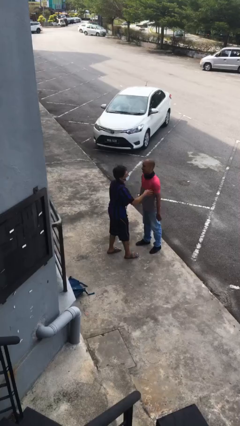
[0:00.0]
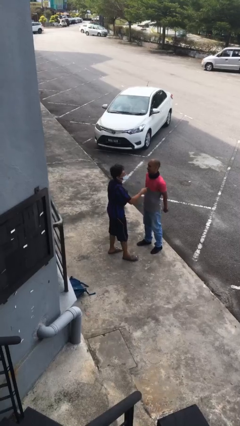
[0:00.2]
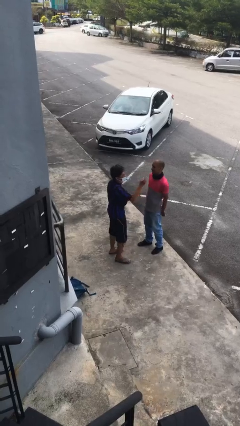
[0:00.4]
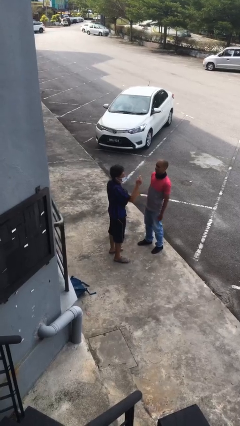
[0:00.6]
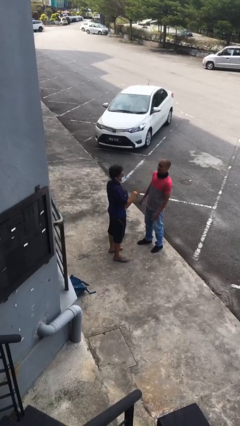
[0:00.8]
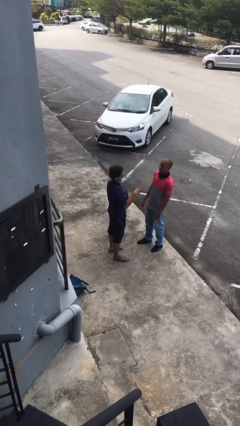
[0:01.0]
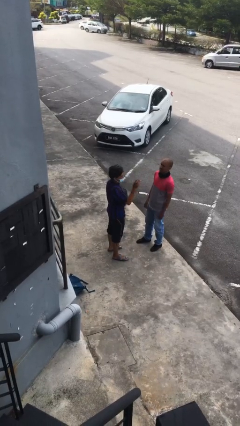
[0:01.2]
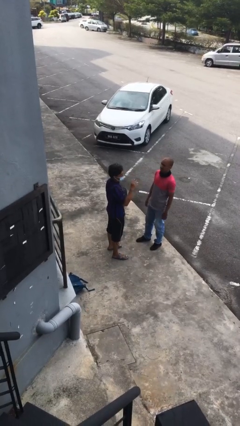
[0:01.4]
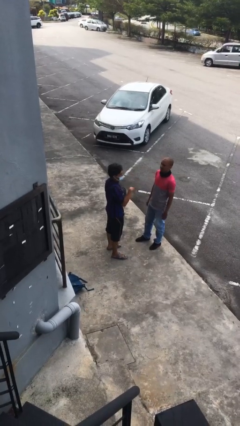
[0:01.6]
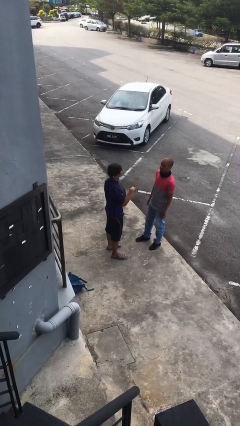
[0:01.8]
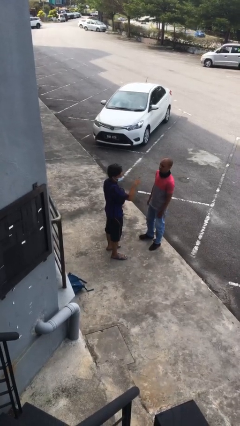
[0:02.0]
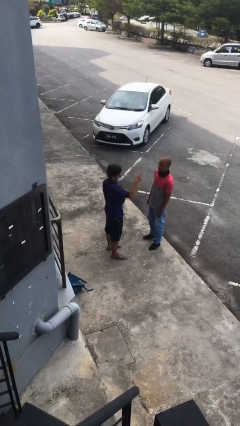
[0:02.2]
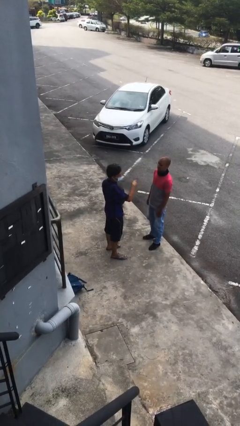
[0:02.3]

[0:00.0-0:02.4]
person talks to person

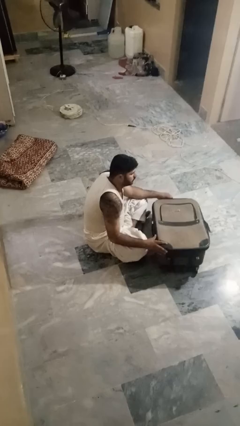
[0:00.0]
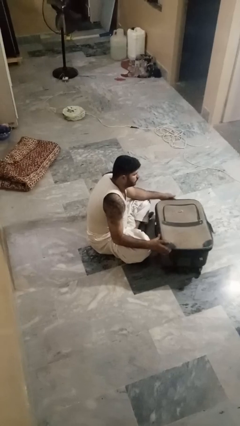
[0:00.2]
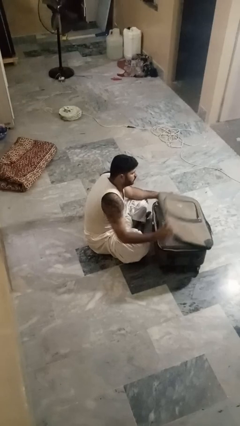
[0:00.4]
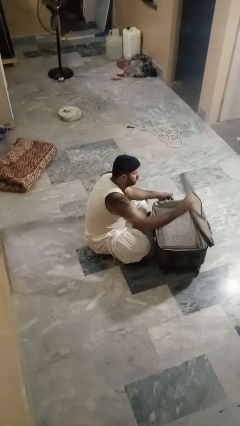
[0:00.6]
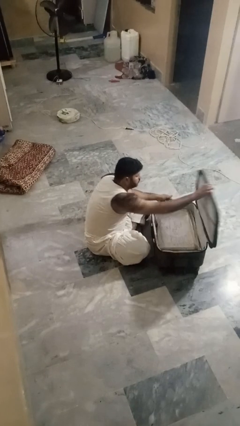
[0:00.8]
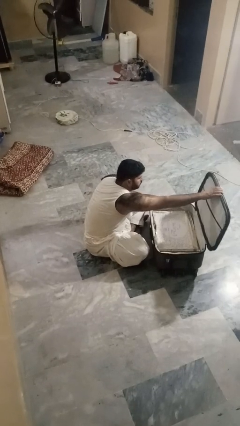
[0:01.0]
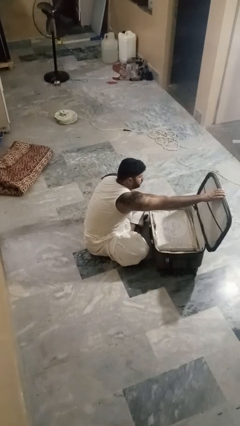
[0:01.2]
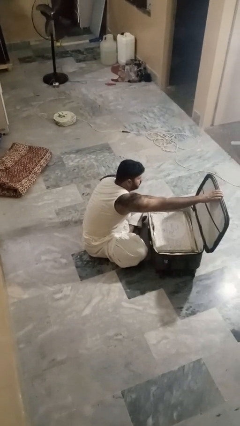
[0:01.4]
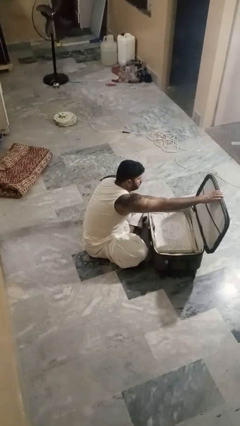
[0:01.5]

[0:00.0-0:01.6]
person opens suitcase

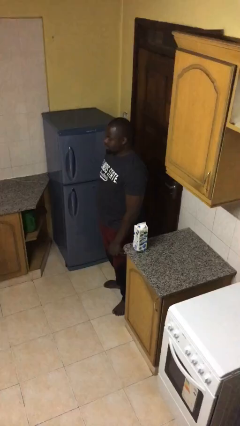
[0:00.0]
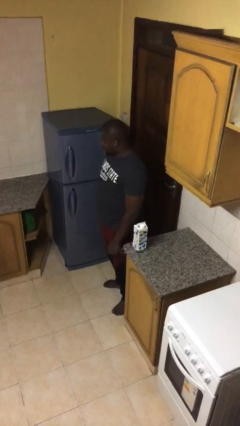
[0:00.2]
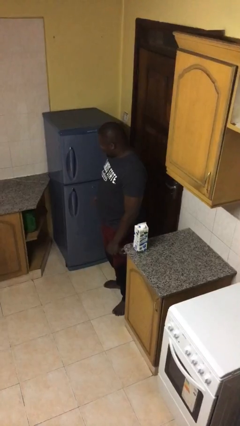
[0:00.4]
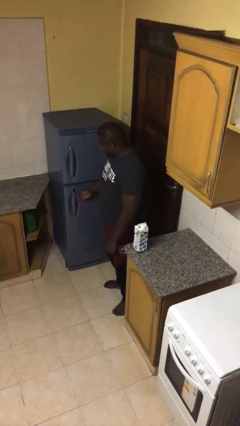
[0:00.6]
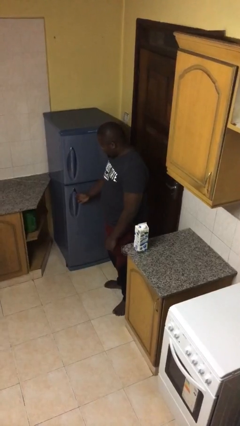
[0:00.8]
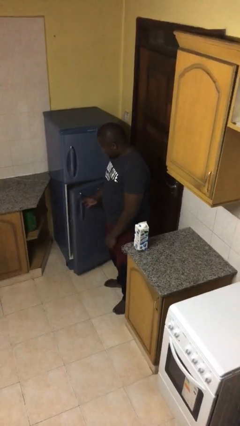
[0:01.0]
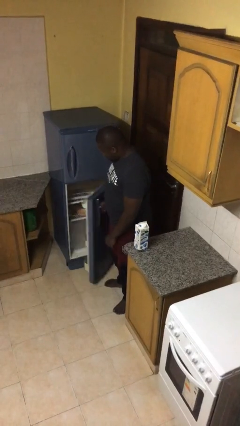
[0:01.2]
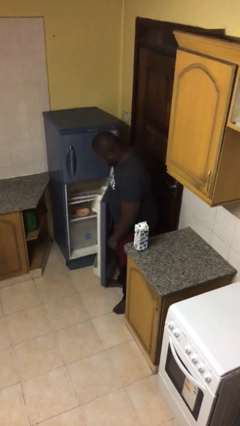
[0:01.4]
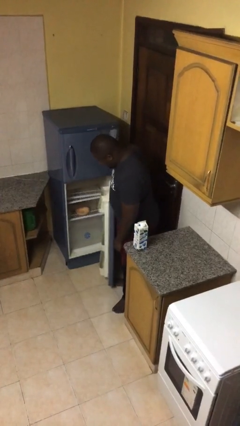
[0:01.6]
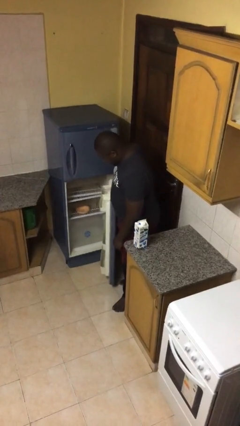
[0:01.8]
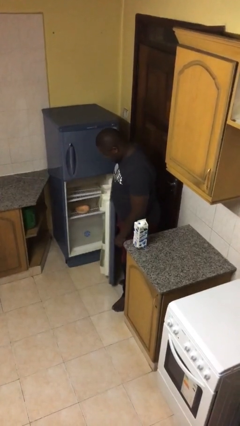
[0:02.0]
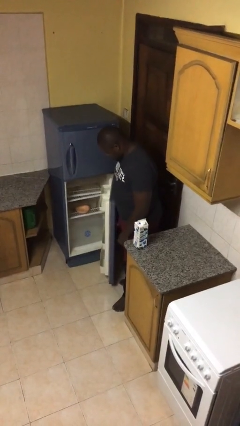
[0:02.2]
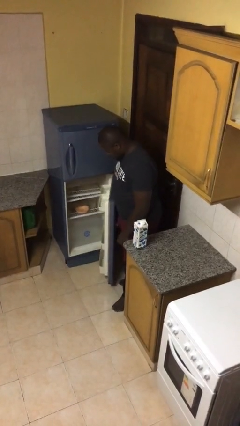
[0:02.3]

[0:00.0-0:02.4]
person opens refrigerator

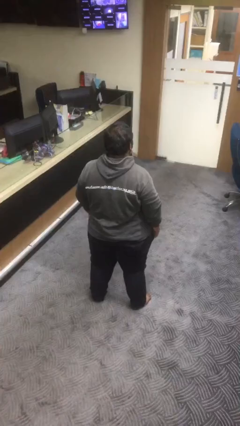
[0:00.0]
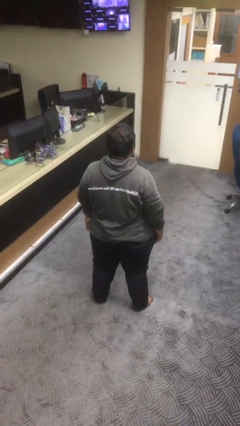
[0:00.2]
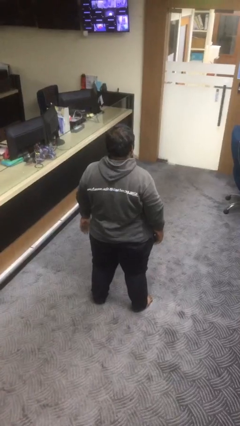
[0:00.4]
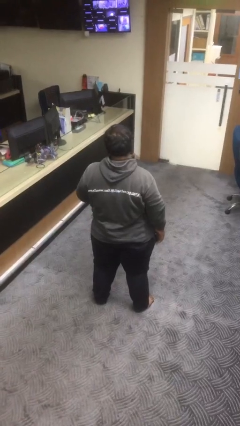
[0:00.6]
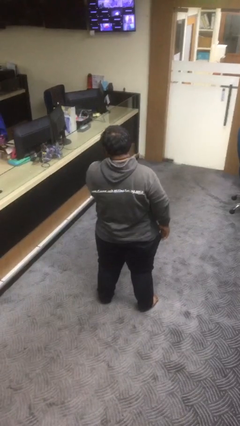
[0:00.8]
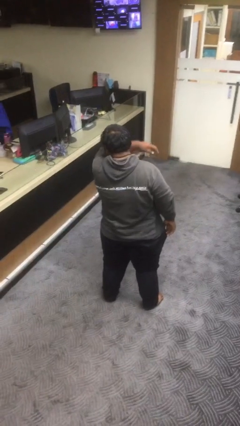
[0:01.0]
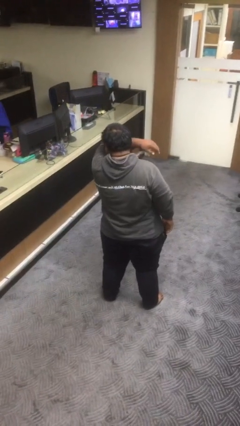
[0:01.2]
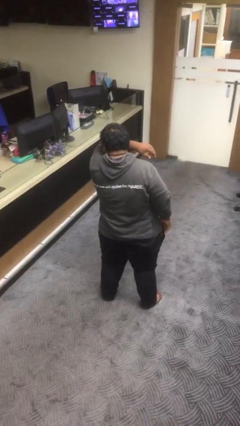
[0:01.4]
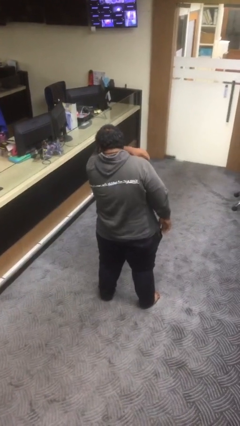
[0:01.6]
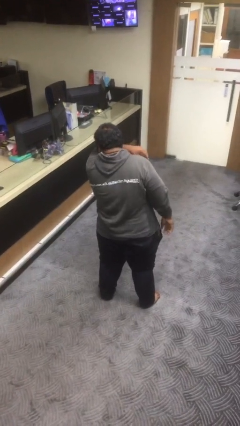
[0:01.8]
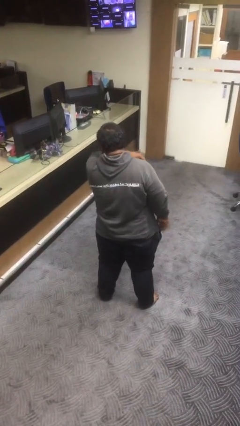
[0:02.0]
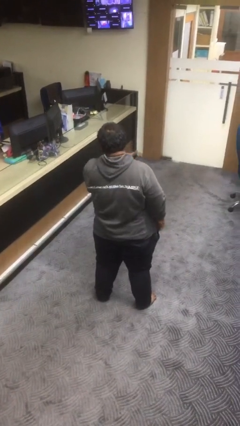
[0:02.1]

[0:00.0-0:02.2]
person sneezes into arm

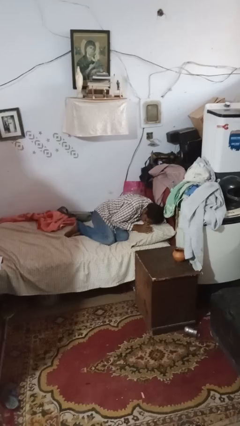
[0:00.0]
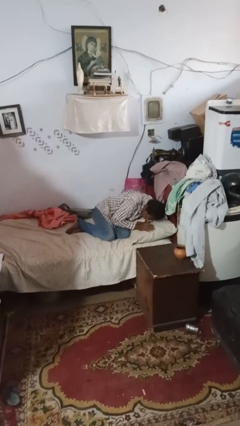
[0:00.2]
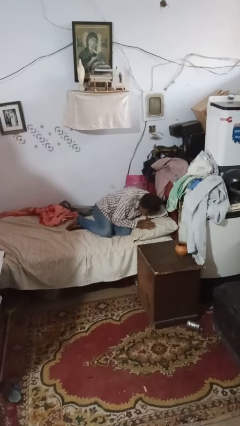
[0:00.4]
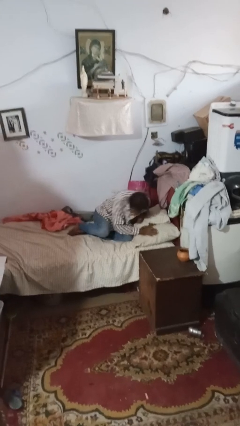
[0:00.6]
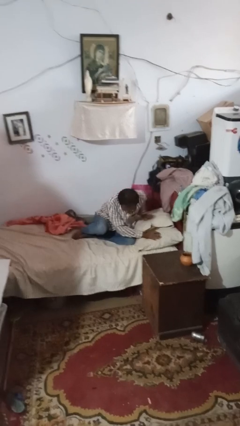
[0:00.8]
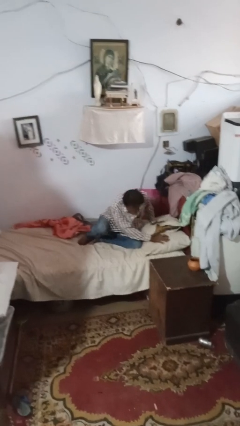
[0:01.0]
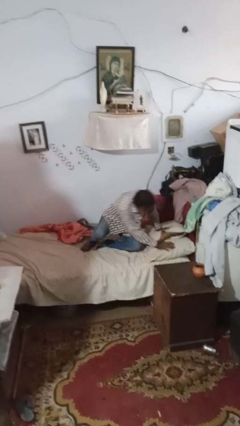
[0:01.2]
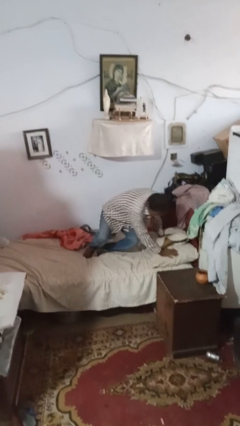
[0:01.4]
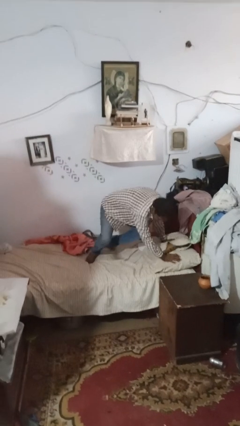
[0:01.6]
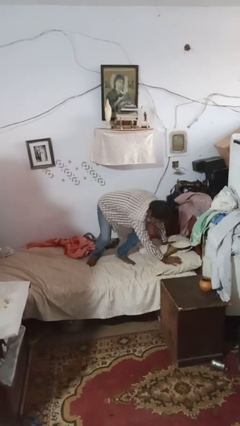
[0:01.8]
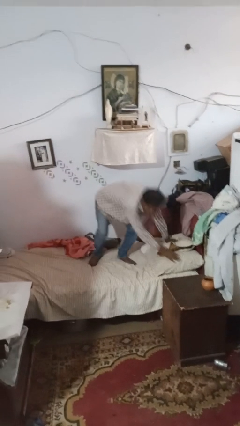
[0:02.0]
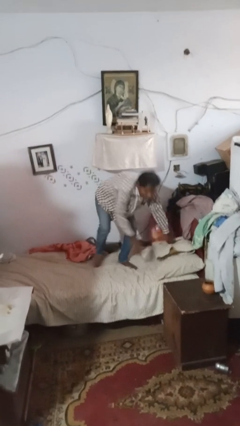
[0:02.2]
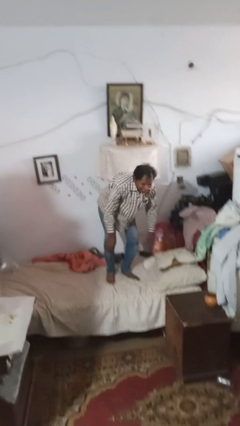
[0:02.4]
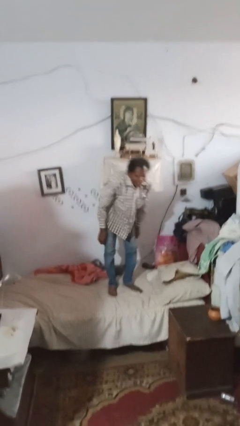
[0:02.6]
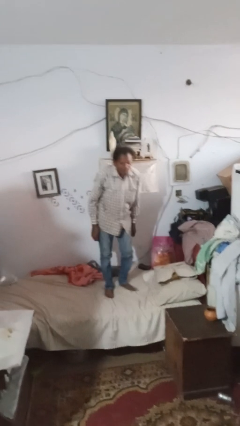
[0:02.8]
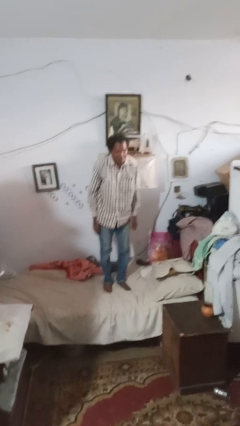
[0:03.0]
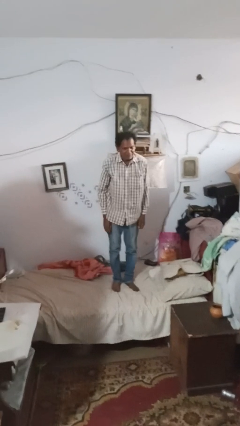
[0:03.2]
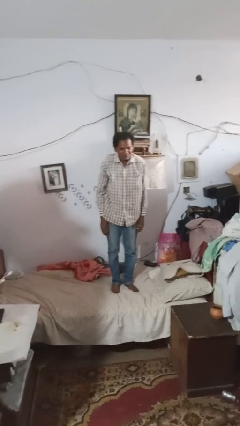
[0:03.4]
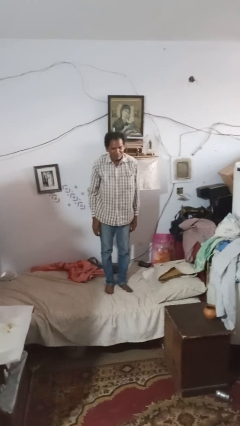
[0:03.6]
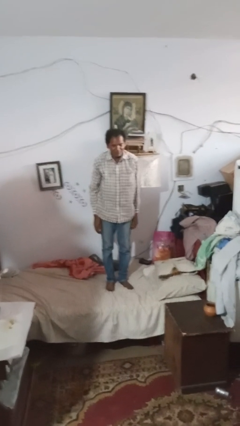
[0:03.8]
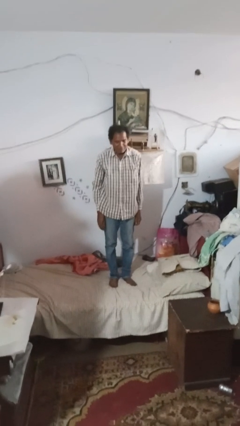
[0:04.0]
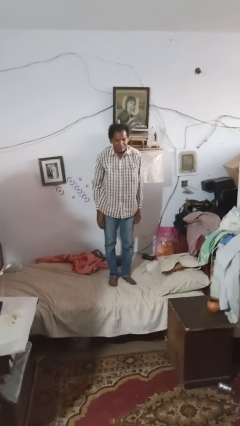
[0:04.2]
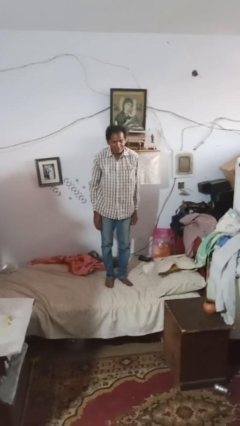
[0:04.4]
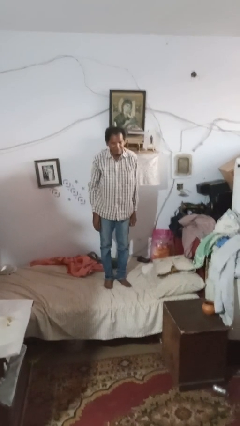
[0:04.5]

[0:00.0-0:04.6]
person stands up

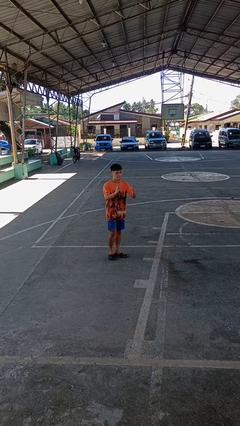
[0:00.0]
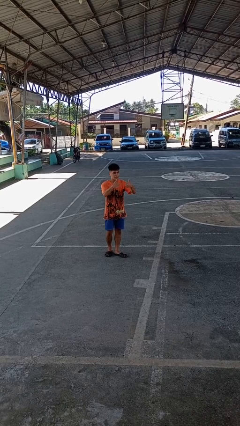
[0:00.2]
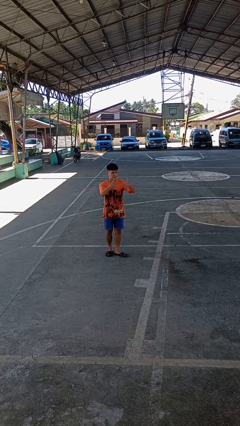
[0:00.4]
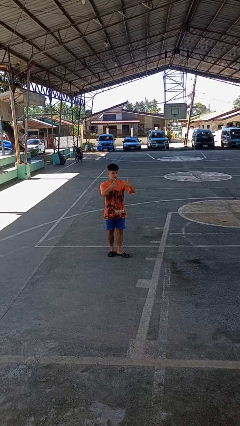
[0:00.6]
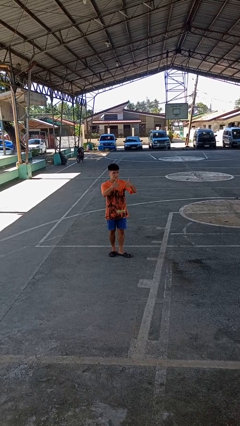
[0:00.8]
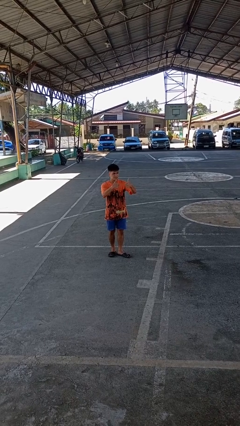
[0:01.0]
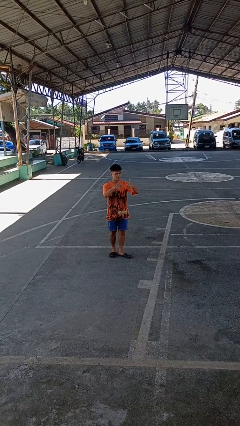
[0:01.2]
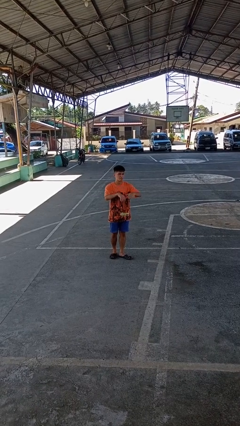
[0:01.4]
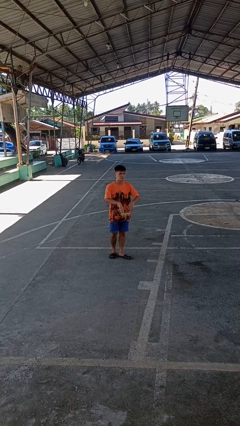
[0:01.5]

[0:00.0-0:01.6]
person gestures thumbs up

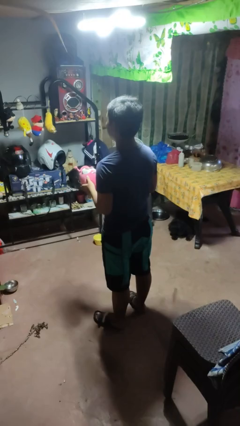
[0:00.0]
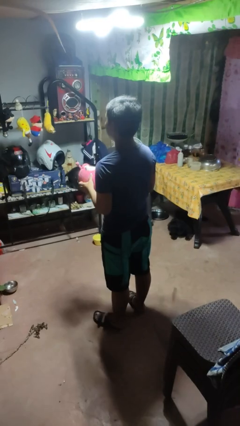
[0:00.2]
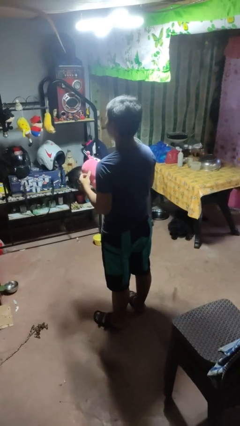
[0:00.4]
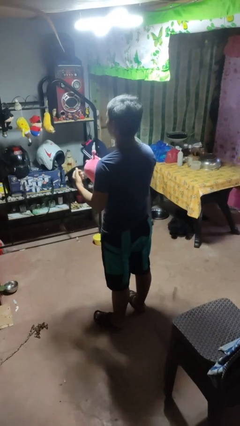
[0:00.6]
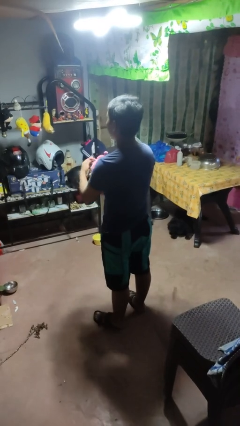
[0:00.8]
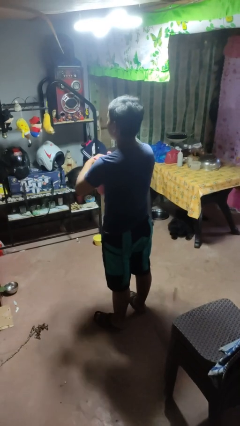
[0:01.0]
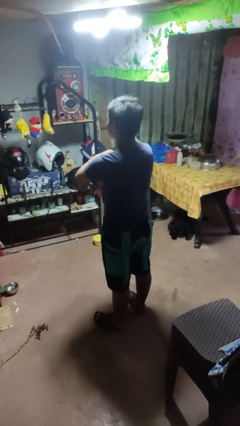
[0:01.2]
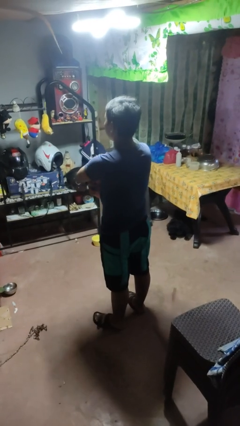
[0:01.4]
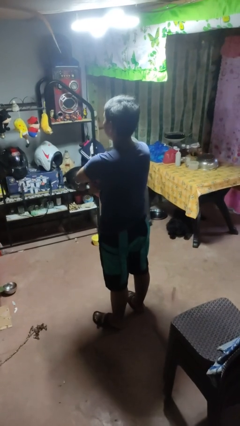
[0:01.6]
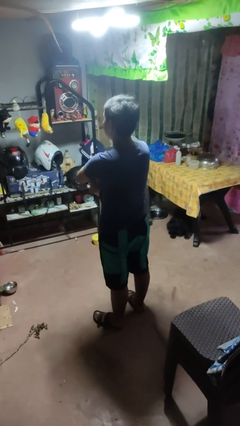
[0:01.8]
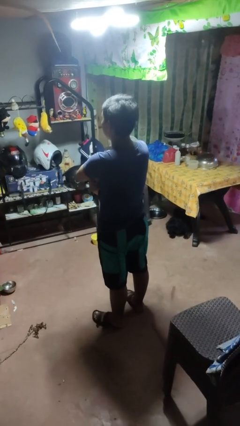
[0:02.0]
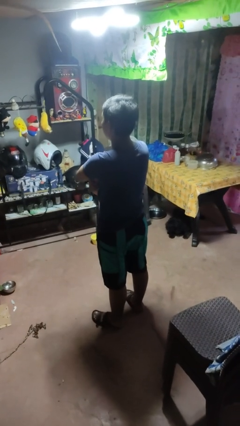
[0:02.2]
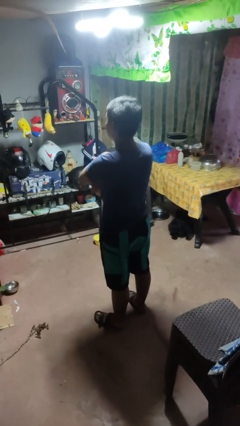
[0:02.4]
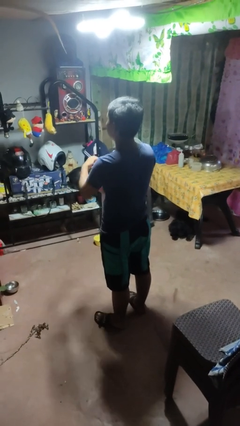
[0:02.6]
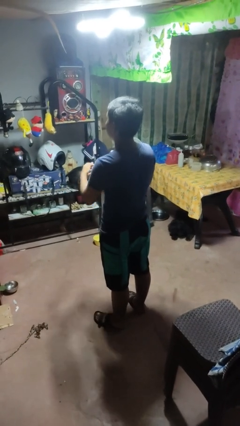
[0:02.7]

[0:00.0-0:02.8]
person hugs stuffed animal
